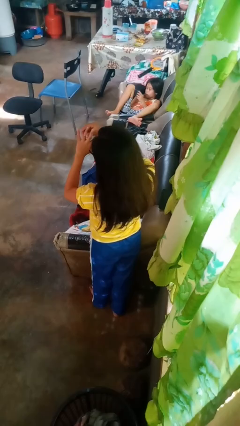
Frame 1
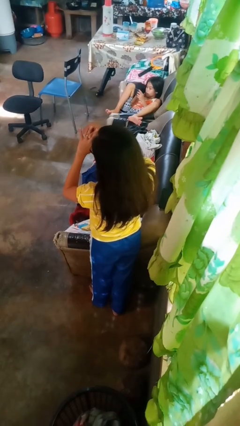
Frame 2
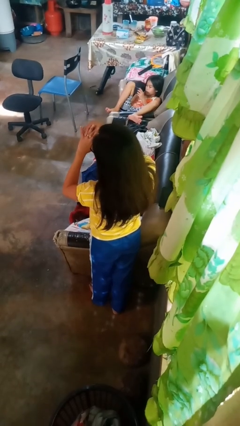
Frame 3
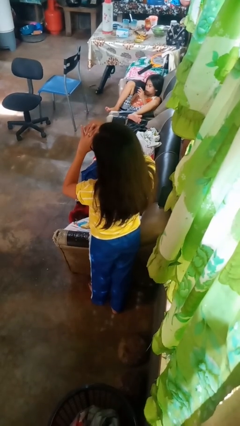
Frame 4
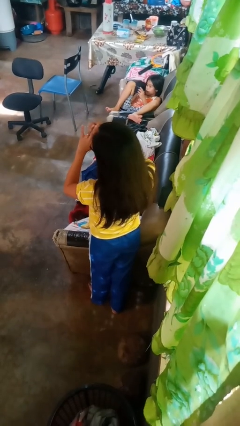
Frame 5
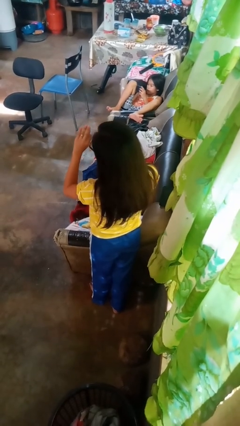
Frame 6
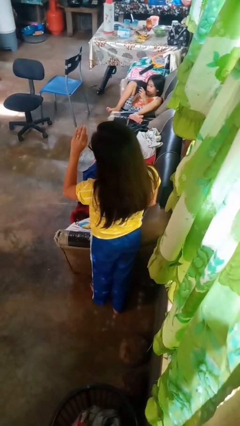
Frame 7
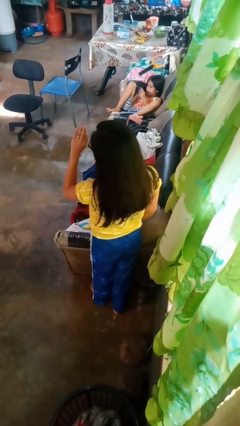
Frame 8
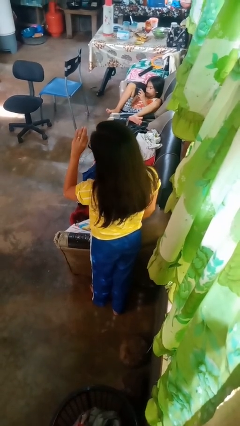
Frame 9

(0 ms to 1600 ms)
person puts on ring

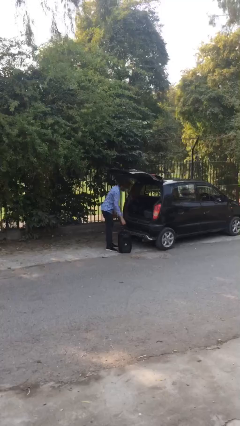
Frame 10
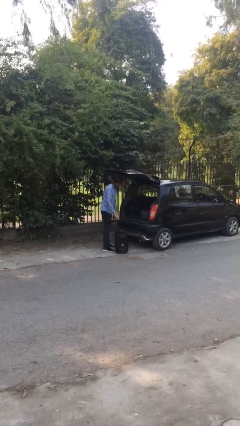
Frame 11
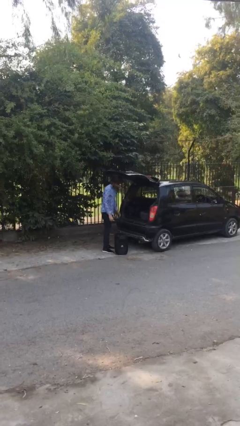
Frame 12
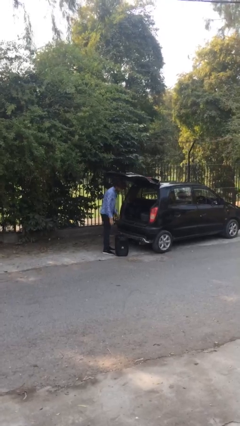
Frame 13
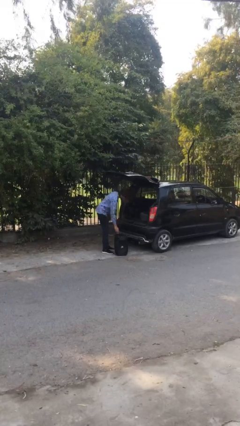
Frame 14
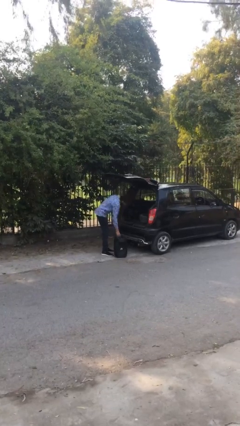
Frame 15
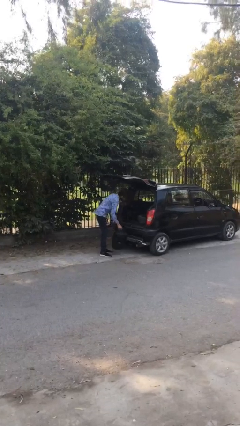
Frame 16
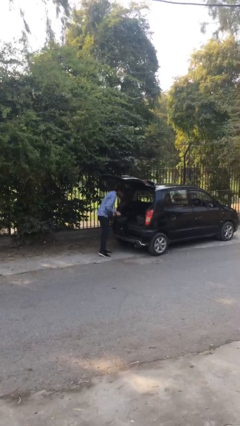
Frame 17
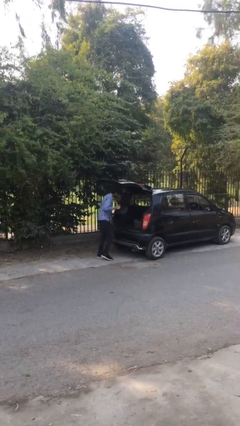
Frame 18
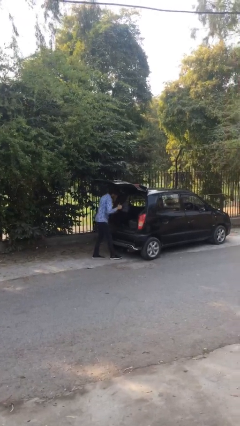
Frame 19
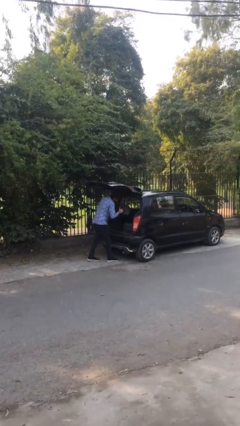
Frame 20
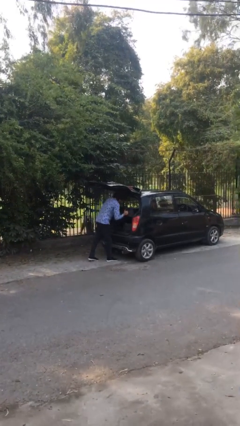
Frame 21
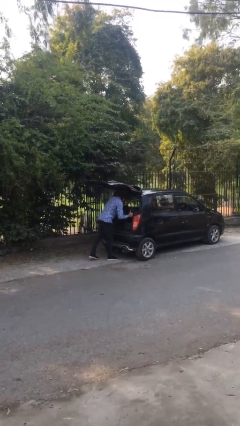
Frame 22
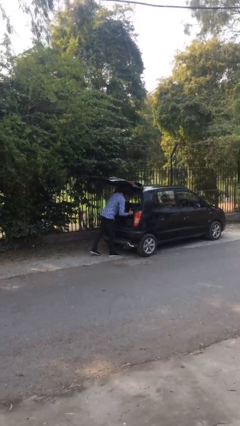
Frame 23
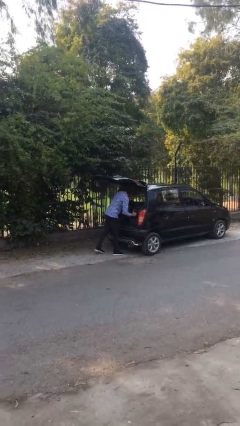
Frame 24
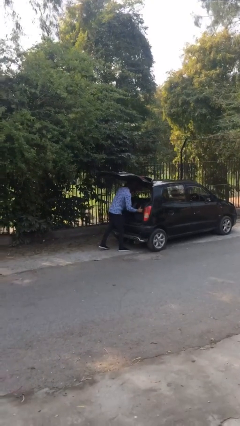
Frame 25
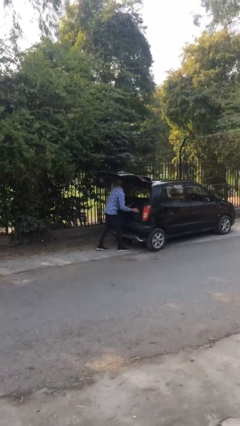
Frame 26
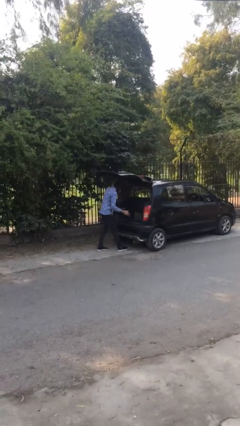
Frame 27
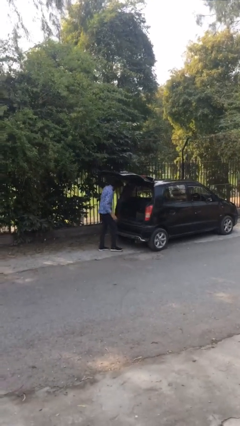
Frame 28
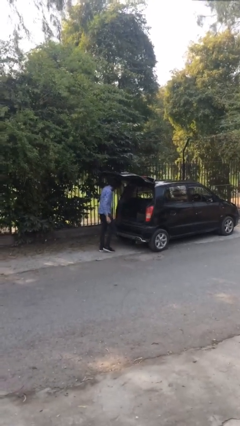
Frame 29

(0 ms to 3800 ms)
person loads car

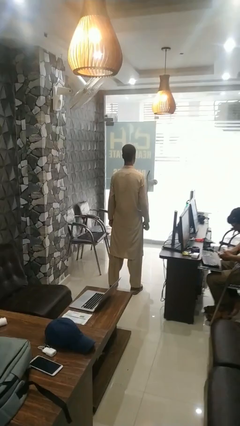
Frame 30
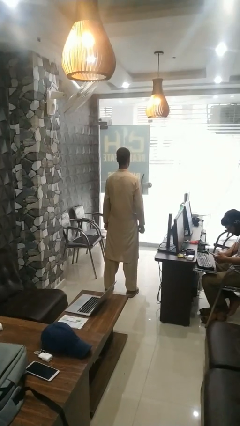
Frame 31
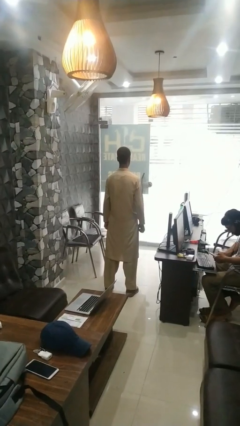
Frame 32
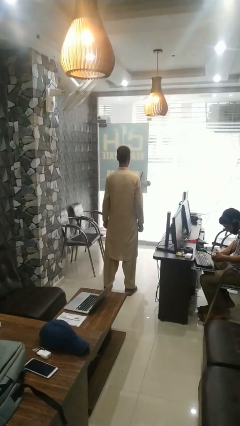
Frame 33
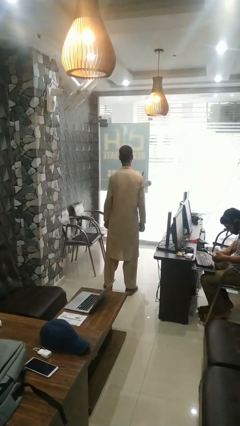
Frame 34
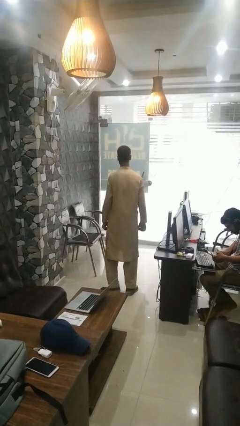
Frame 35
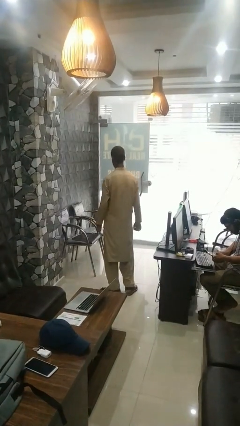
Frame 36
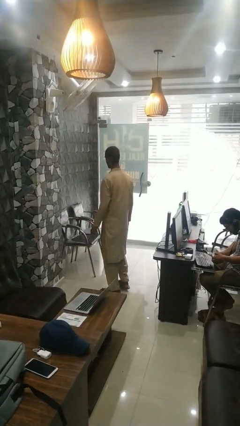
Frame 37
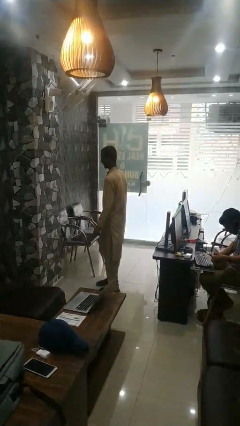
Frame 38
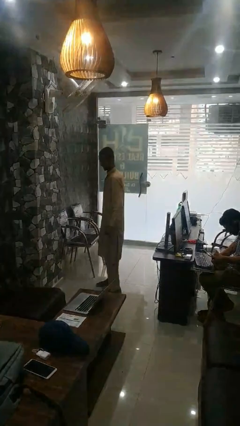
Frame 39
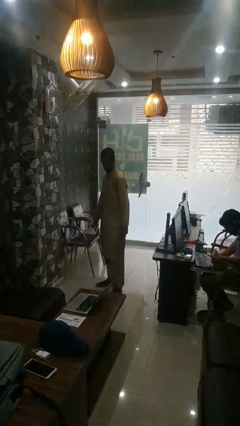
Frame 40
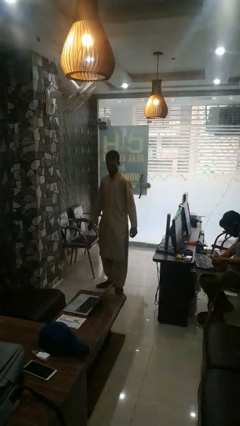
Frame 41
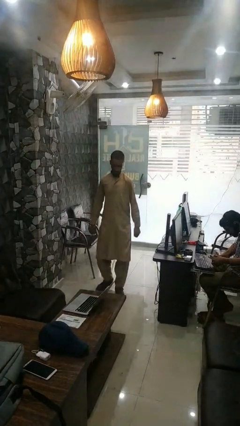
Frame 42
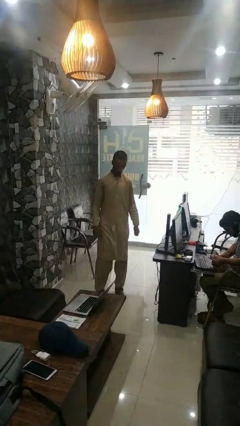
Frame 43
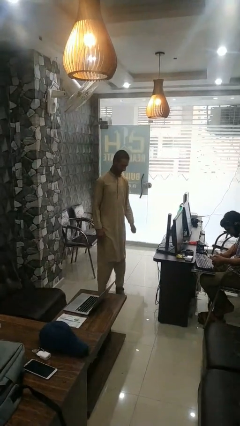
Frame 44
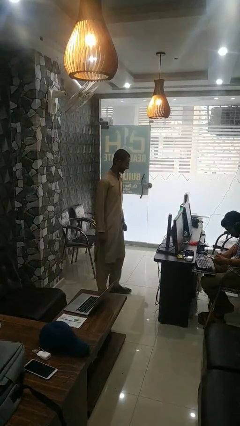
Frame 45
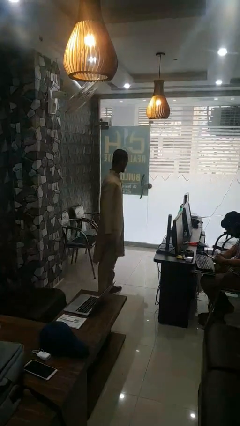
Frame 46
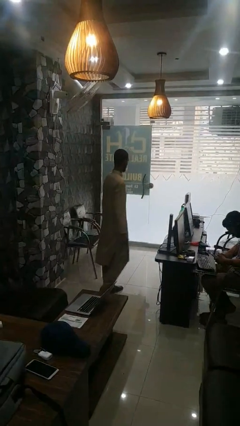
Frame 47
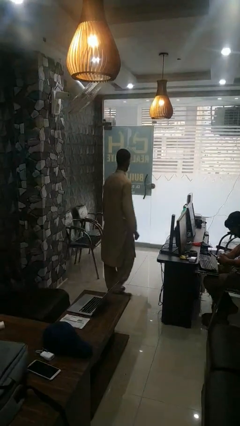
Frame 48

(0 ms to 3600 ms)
person twirls

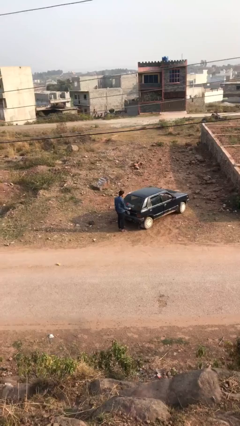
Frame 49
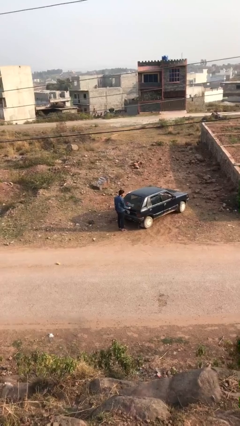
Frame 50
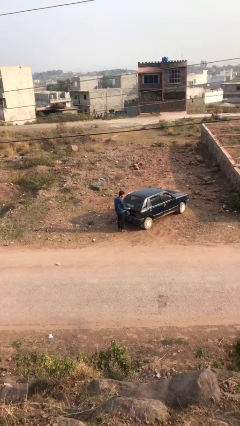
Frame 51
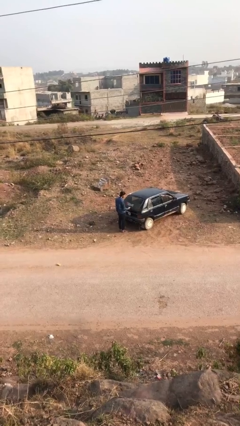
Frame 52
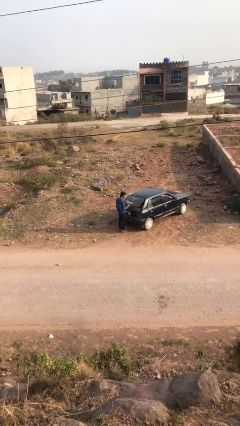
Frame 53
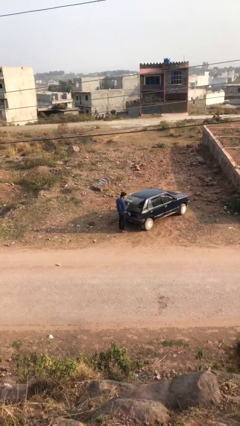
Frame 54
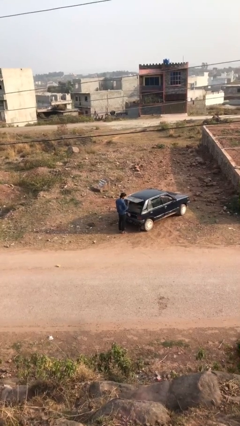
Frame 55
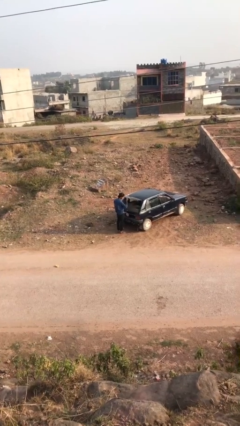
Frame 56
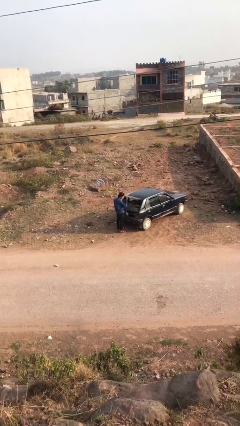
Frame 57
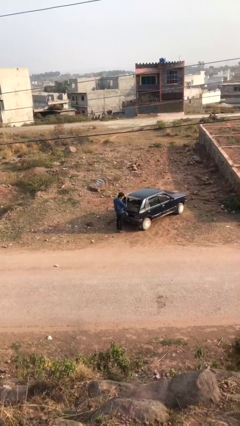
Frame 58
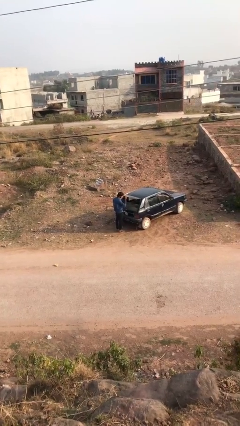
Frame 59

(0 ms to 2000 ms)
person opens car trunk

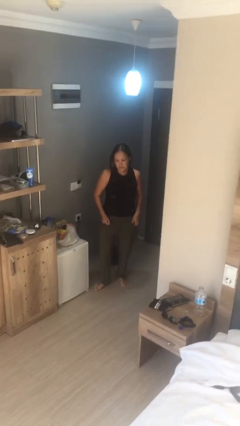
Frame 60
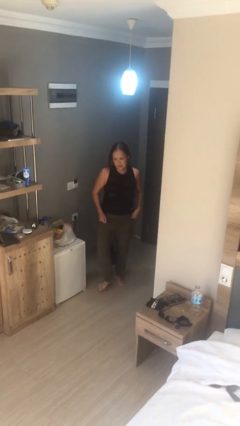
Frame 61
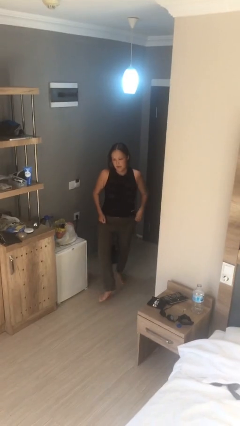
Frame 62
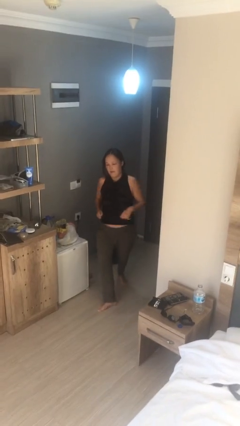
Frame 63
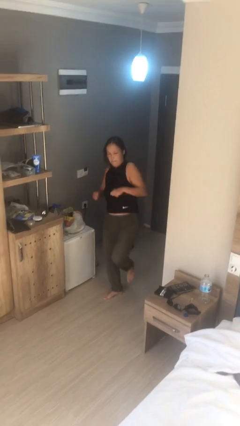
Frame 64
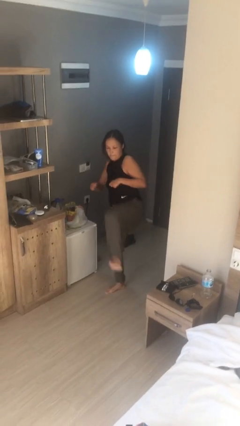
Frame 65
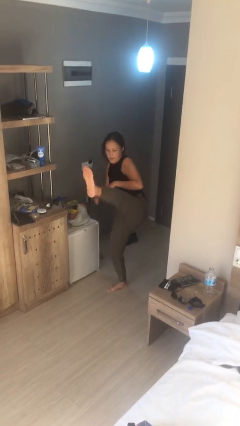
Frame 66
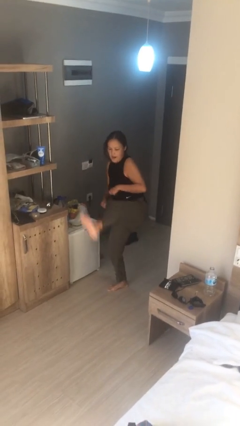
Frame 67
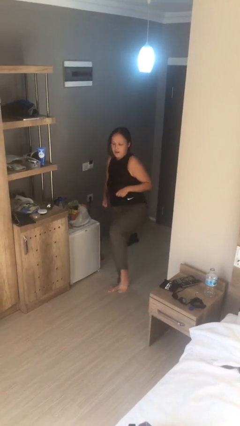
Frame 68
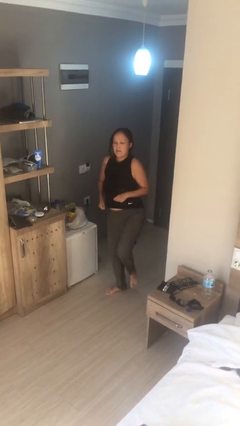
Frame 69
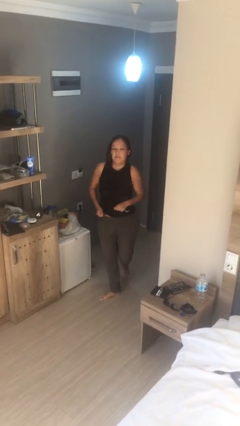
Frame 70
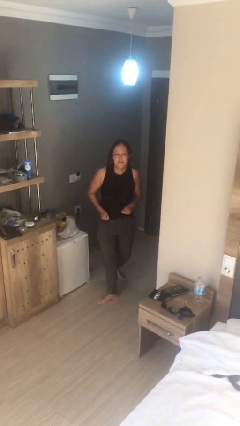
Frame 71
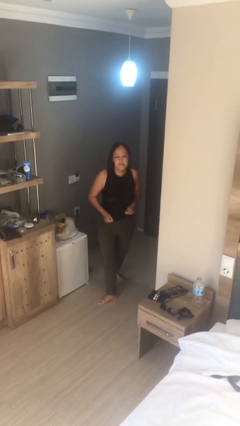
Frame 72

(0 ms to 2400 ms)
person karate kicks

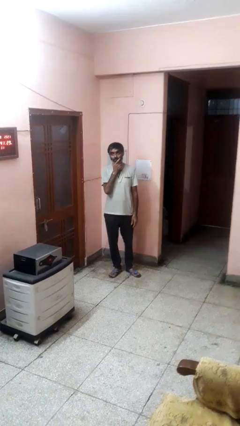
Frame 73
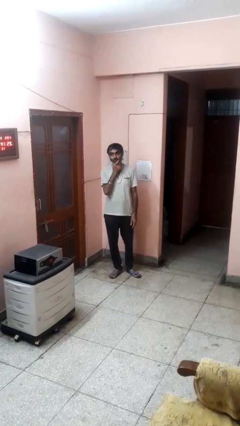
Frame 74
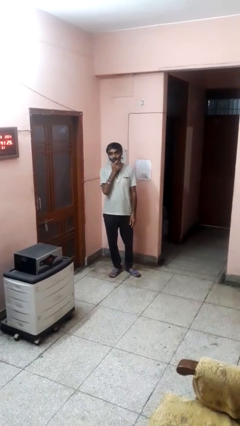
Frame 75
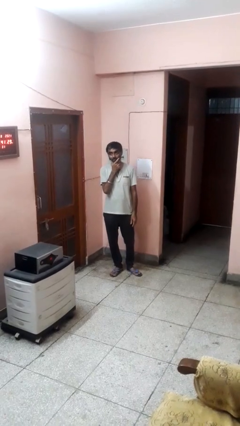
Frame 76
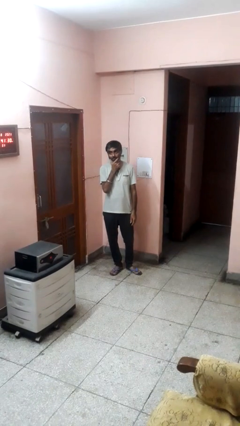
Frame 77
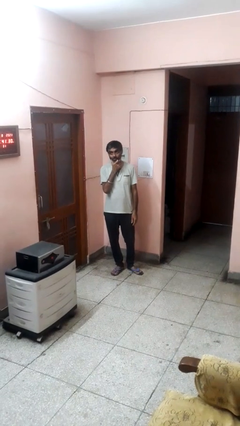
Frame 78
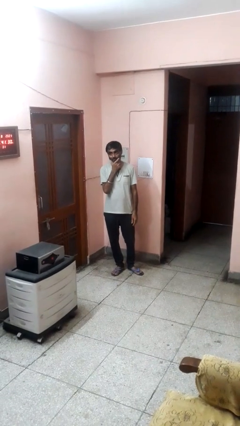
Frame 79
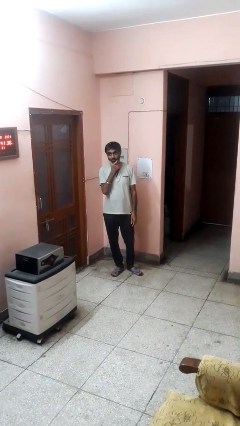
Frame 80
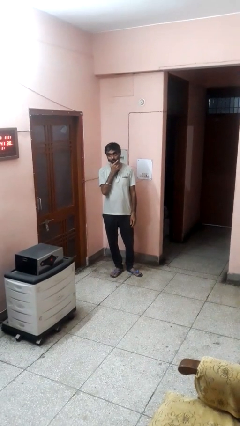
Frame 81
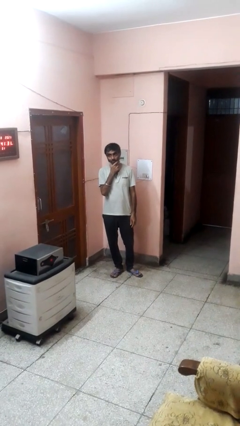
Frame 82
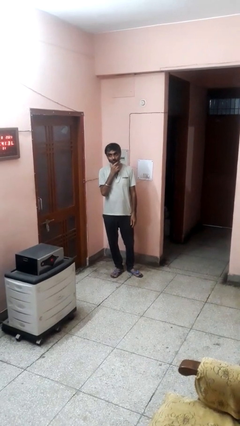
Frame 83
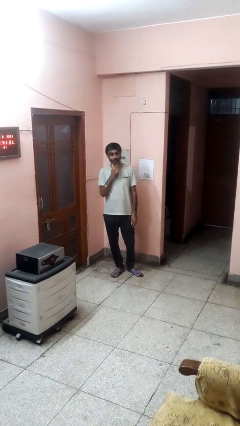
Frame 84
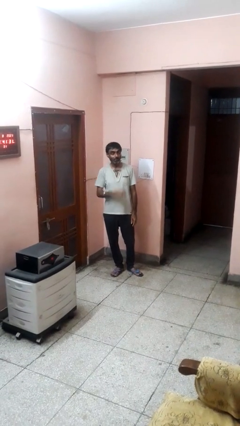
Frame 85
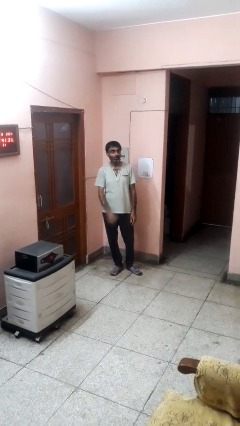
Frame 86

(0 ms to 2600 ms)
person strokes chin

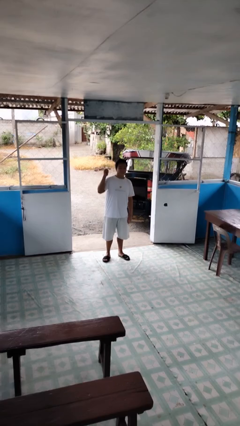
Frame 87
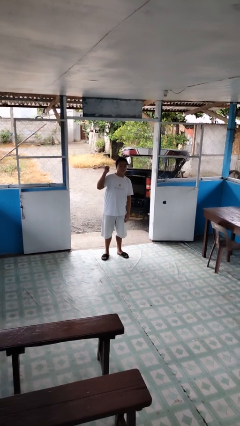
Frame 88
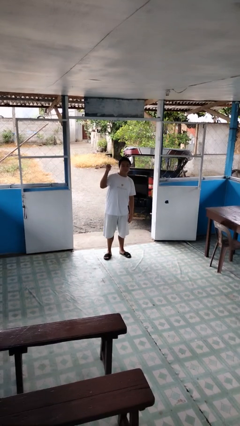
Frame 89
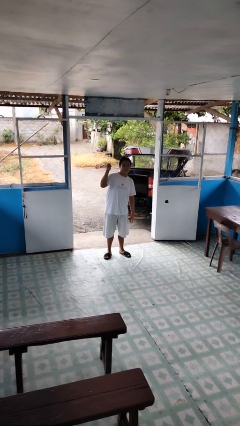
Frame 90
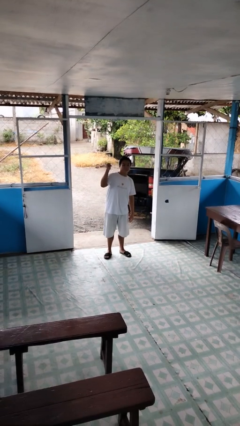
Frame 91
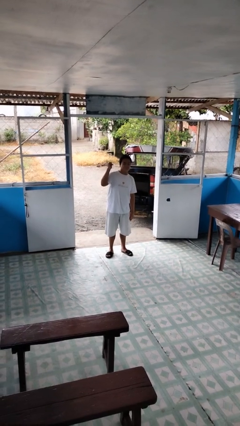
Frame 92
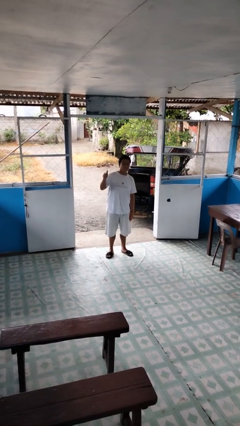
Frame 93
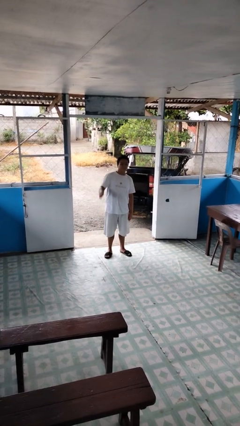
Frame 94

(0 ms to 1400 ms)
person gestures behind me
